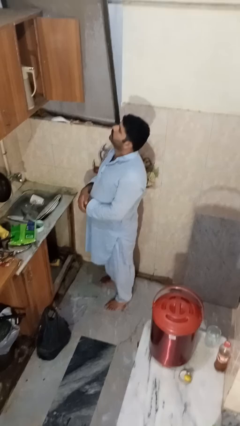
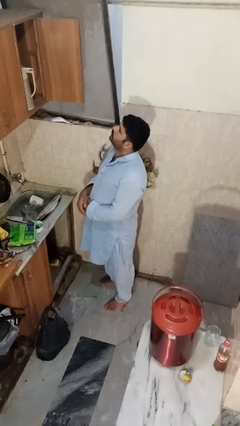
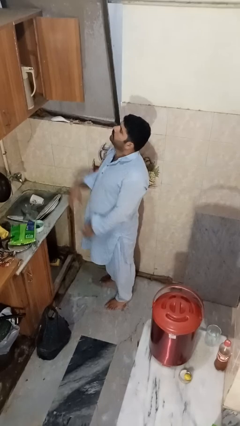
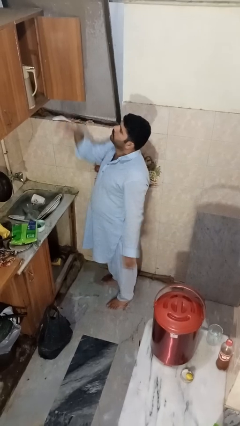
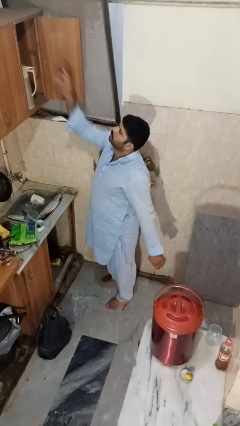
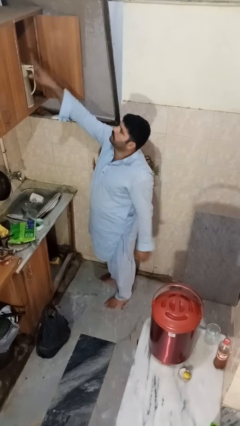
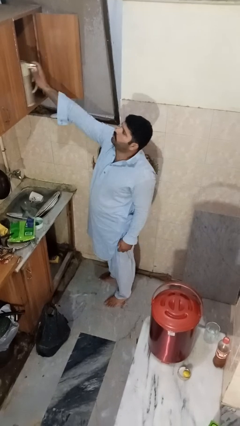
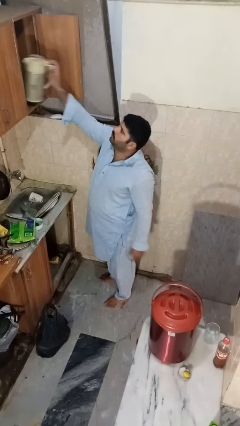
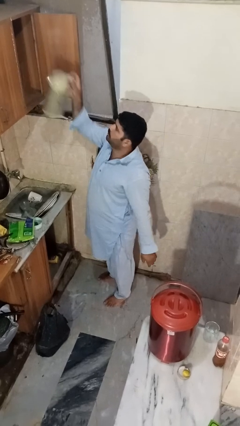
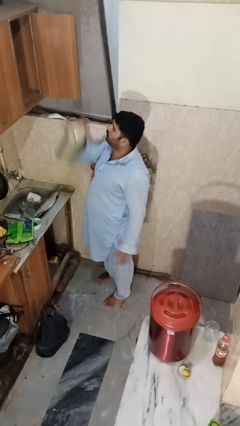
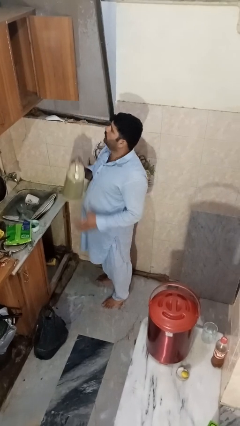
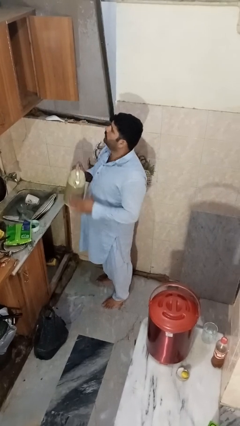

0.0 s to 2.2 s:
person takes object from cabinet

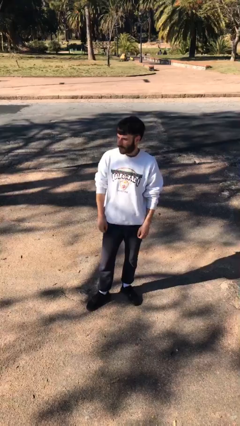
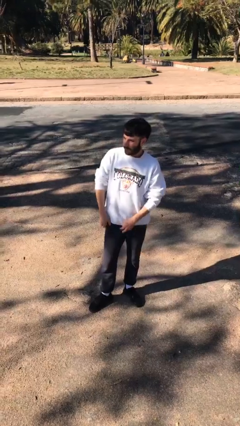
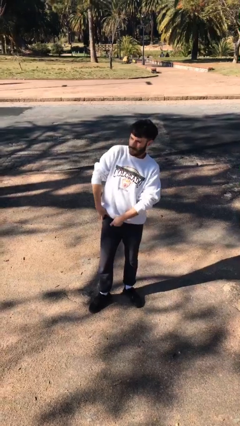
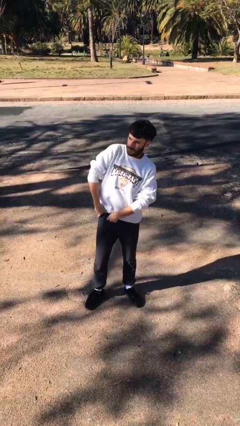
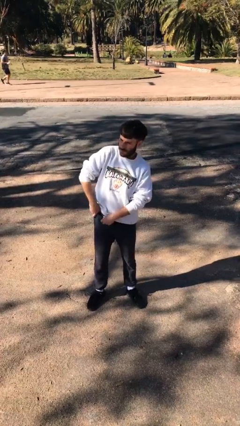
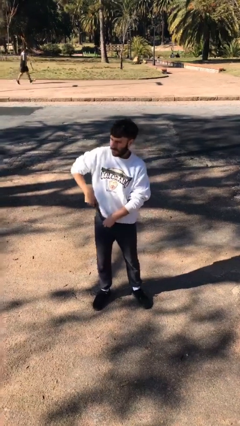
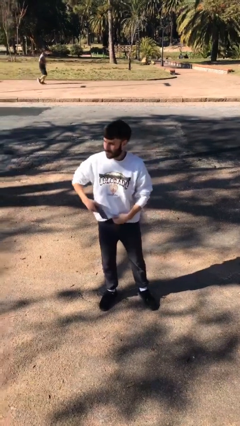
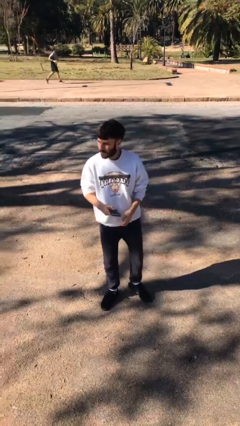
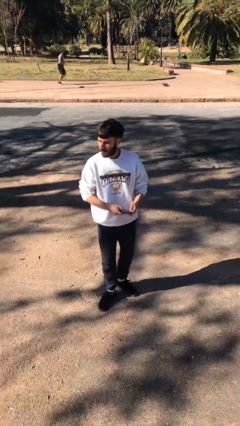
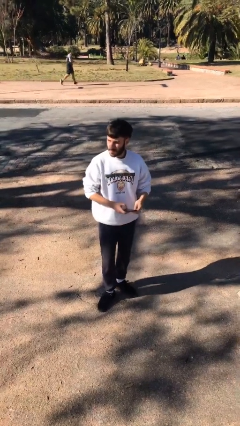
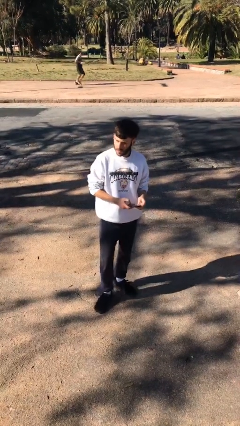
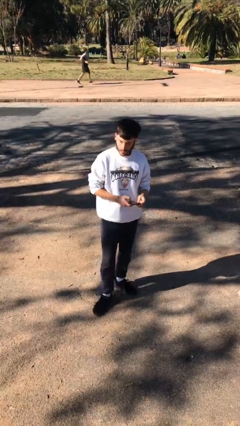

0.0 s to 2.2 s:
person takes phone from pocket

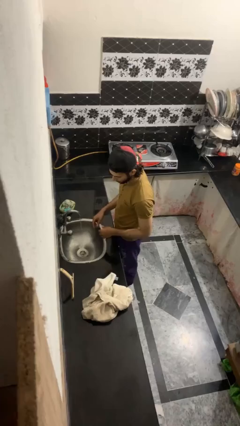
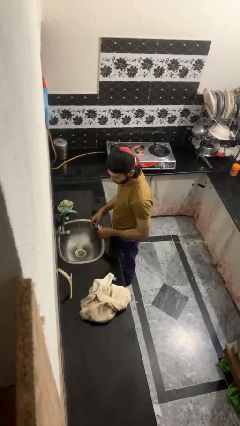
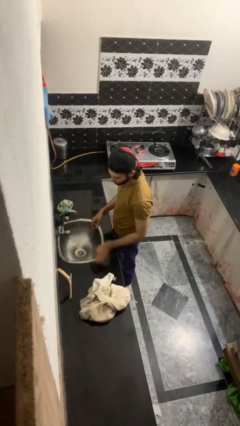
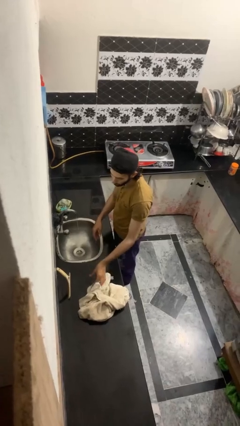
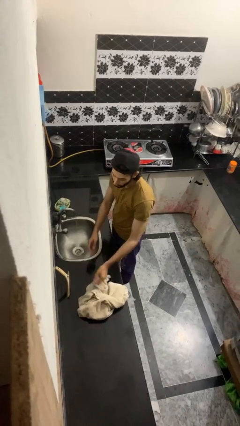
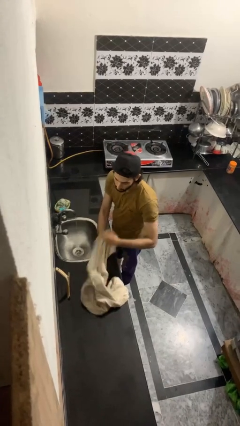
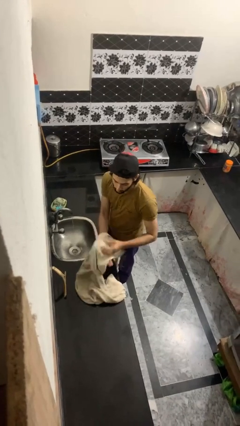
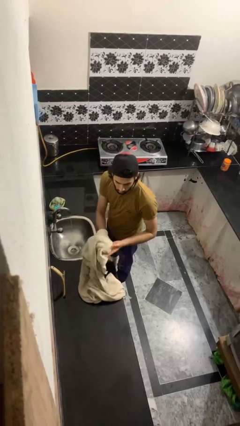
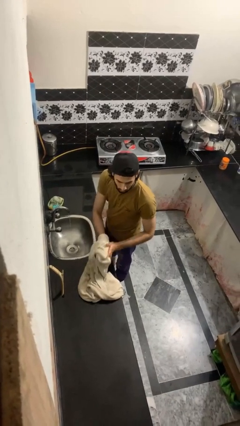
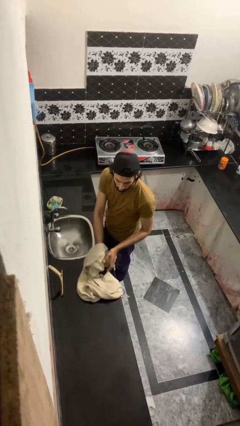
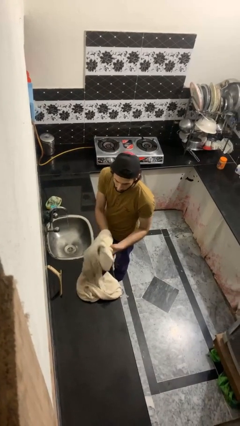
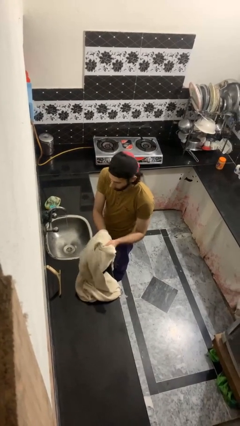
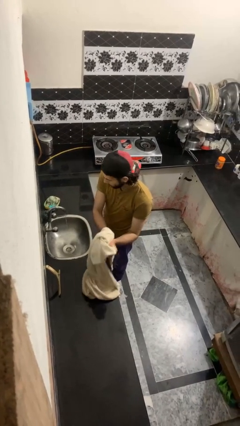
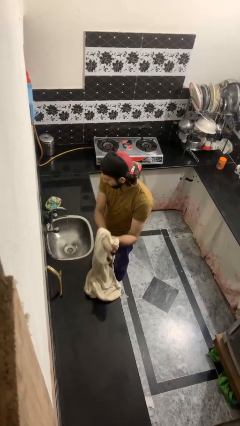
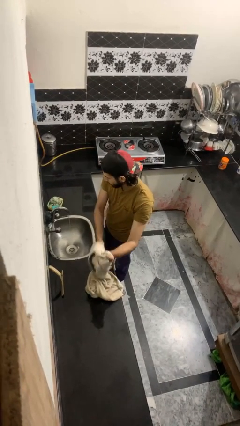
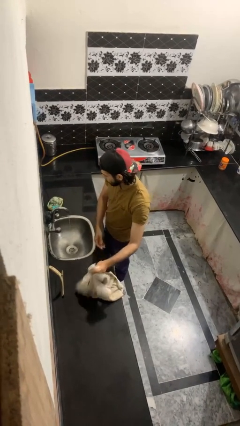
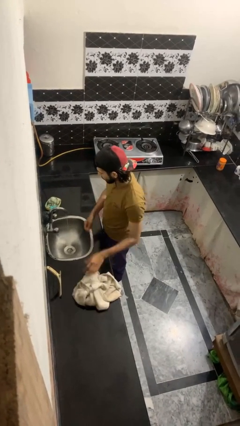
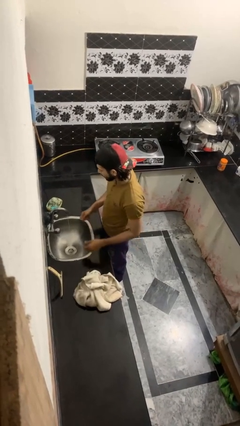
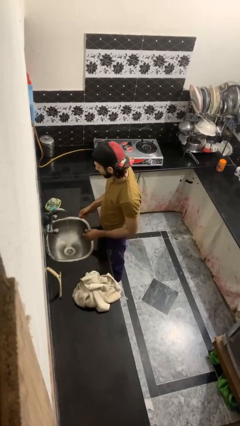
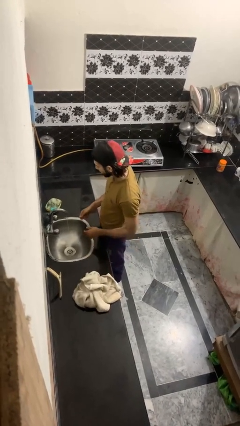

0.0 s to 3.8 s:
person dries hands with towel

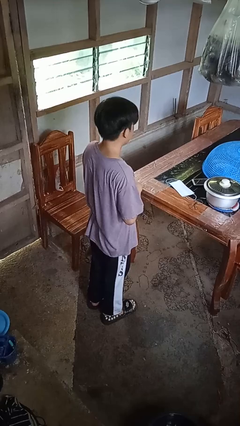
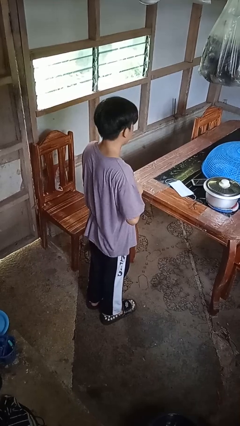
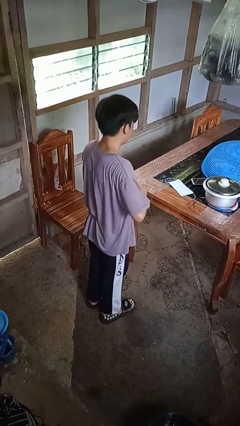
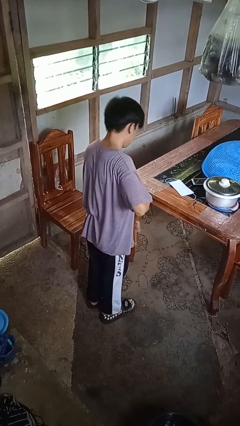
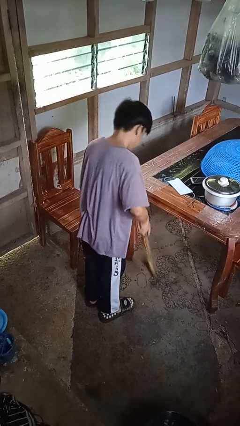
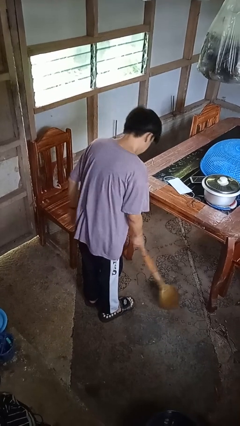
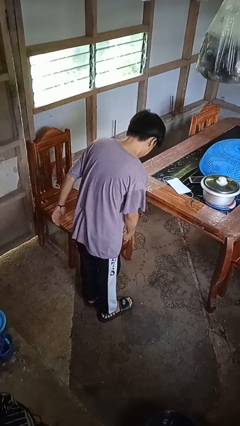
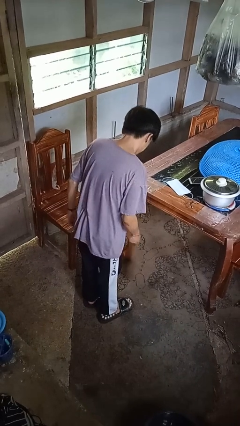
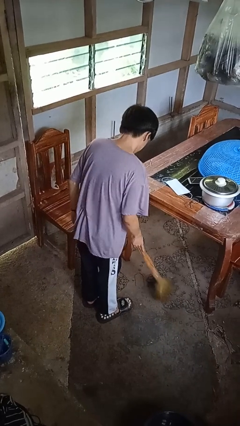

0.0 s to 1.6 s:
person sweeps floor

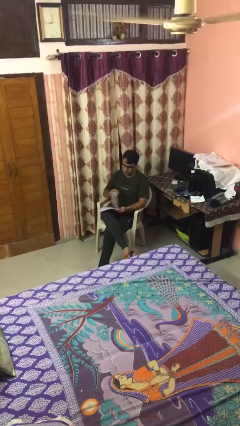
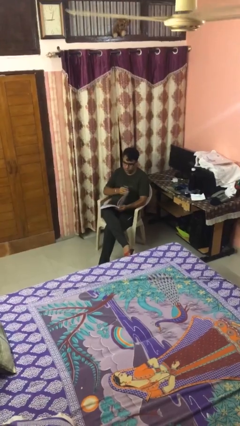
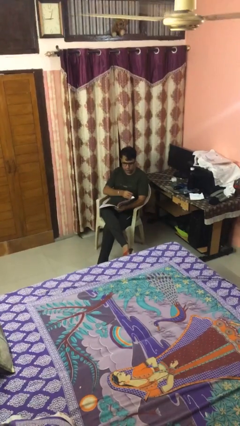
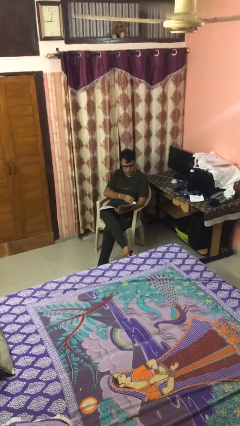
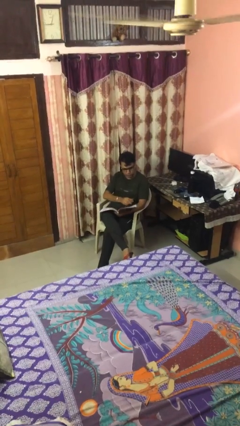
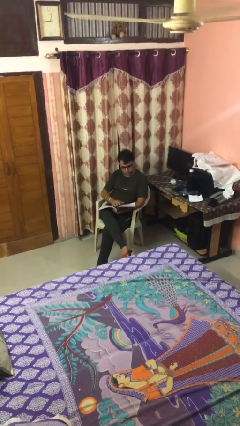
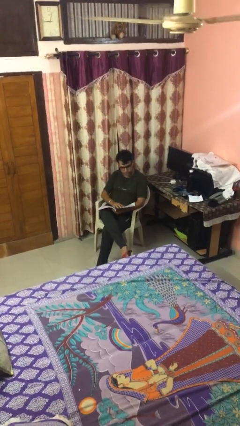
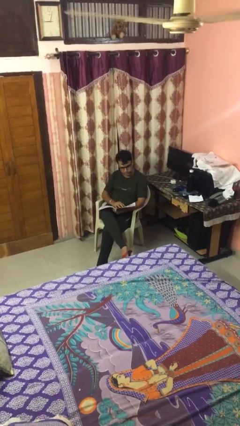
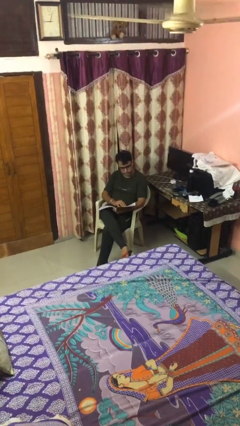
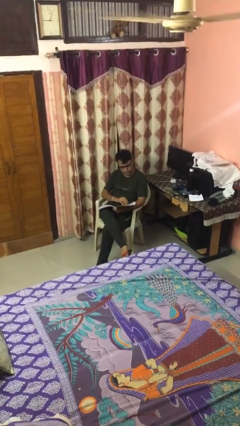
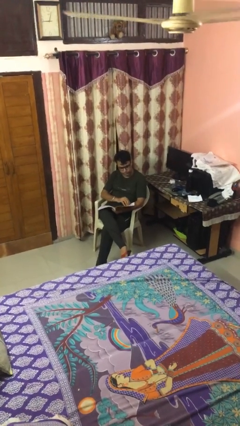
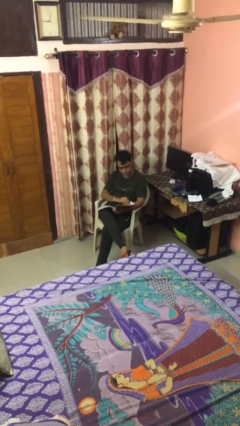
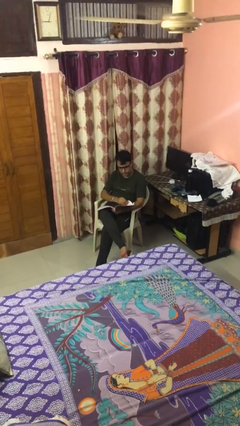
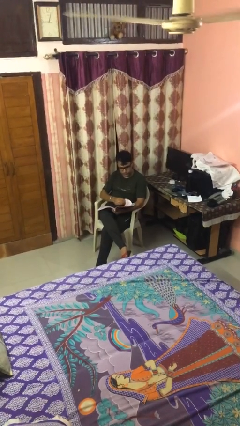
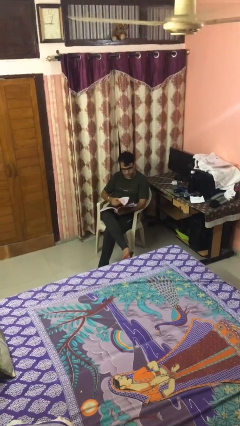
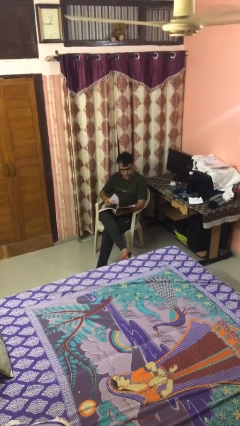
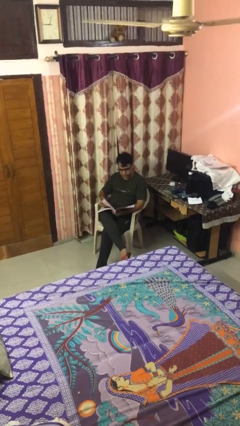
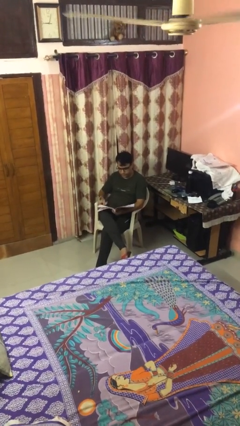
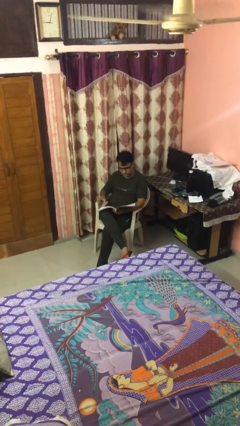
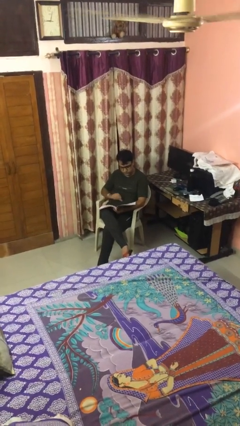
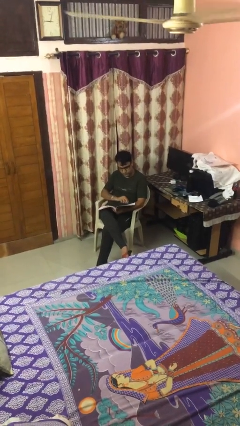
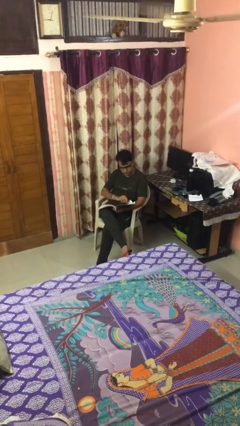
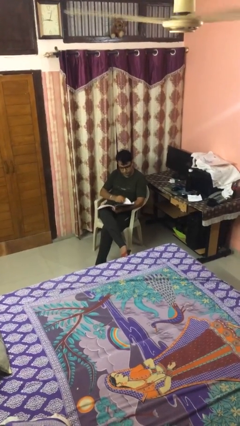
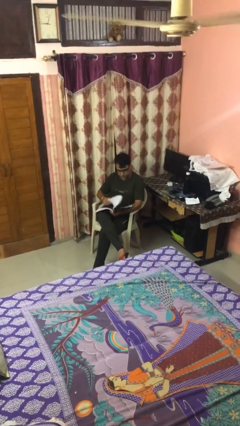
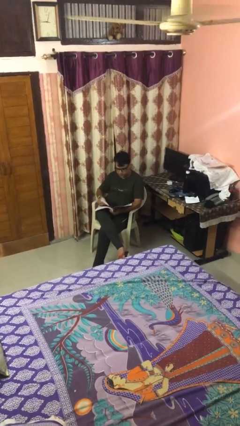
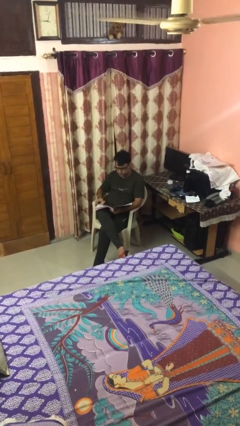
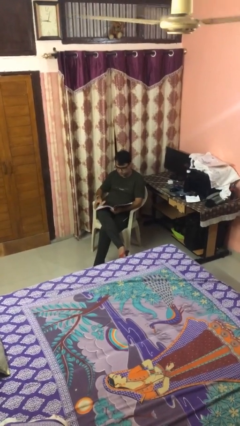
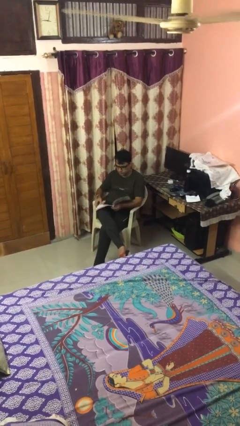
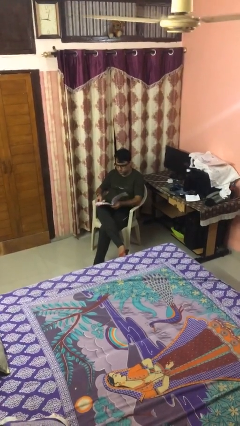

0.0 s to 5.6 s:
person reads magazine

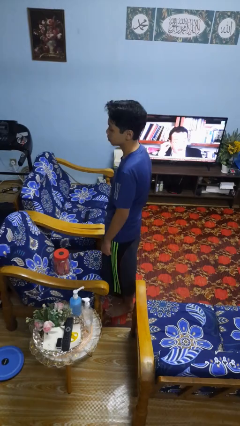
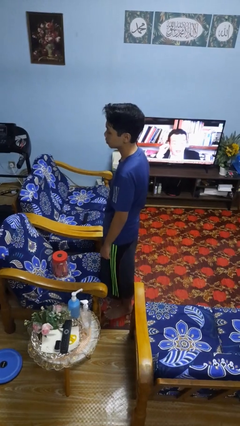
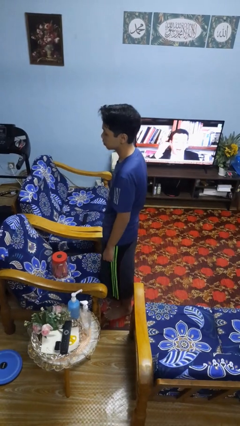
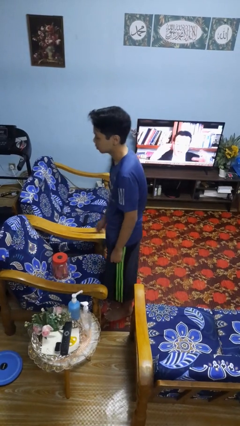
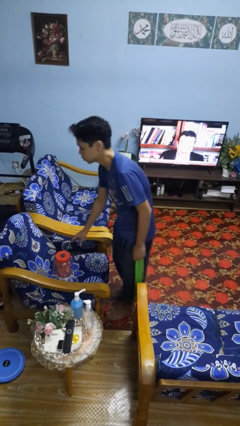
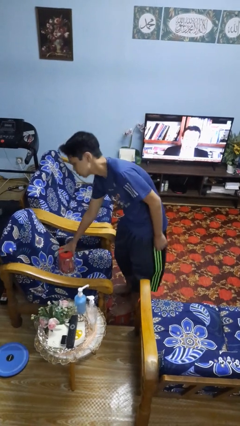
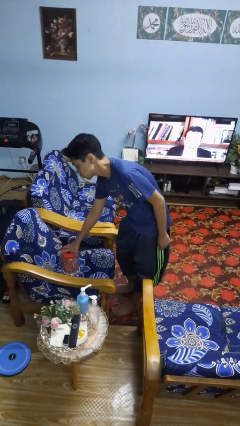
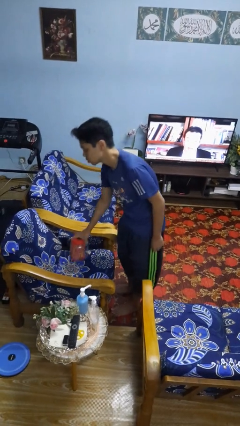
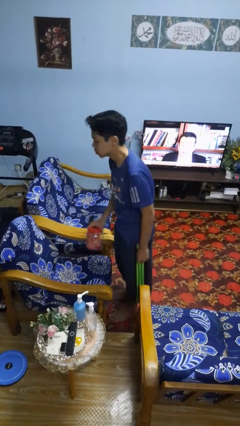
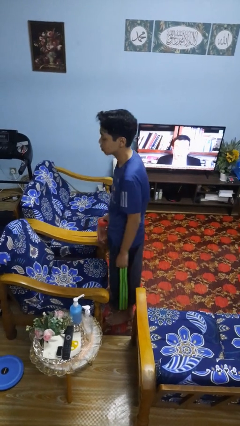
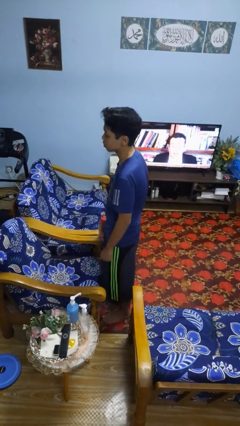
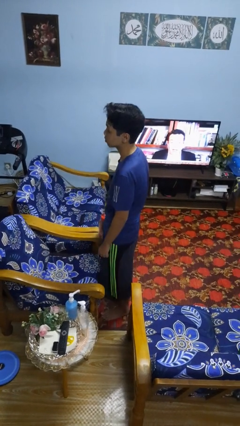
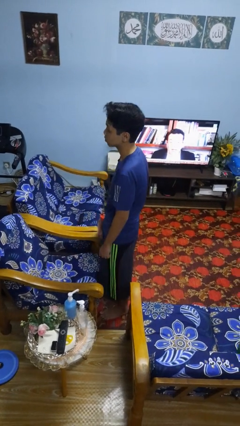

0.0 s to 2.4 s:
person picks up object from couch
